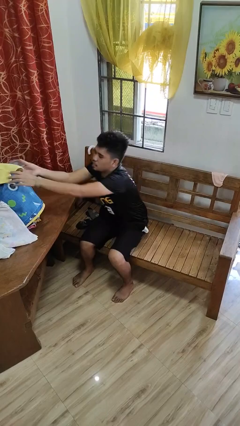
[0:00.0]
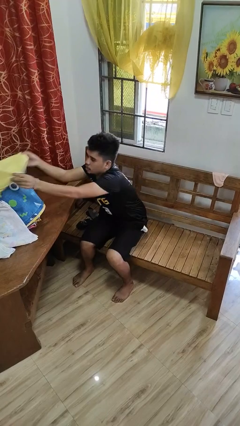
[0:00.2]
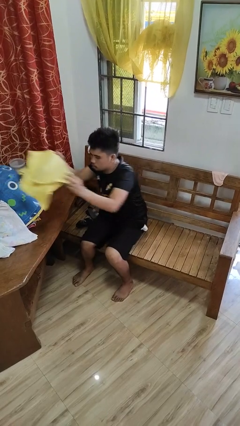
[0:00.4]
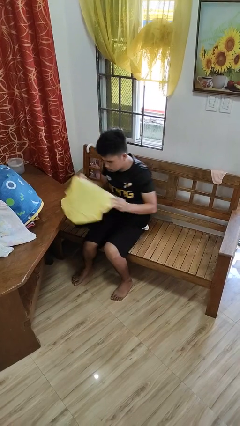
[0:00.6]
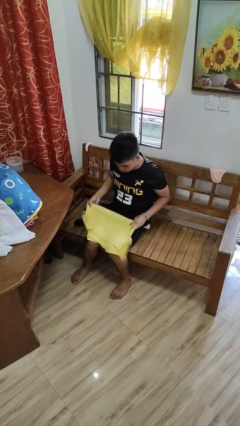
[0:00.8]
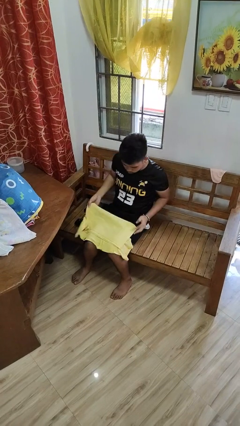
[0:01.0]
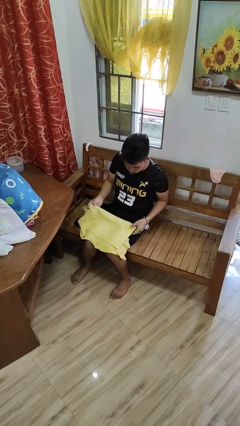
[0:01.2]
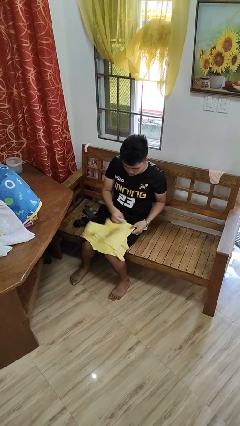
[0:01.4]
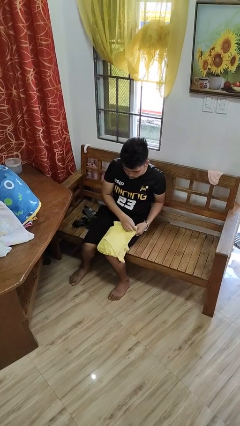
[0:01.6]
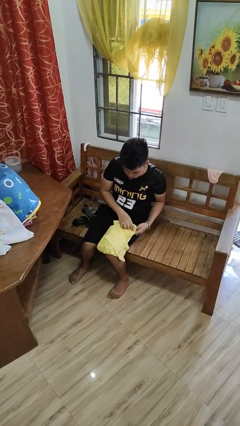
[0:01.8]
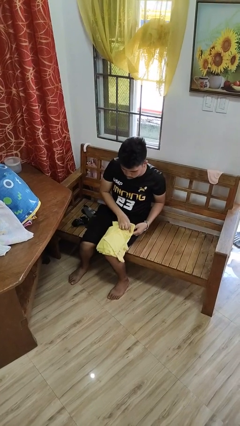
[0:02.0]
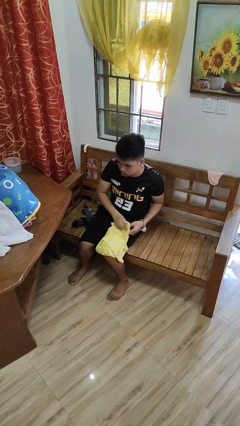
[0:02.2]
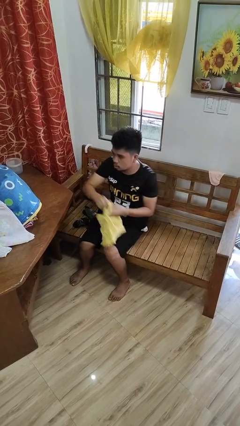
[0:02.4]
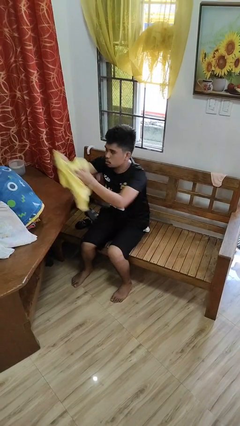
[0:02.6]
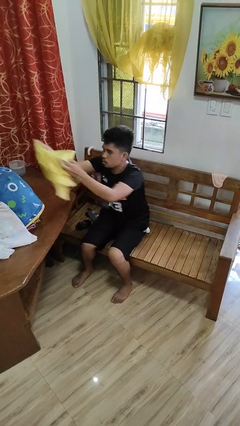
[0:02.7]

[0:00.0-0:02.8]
person folds shirt

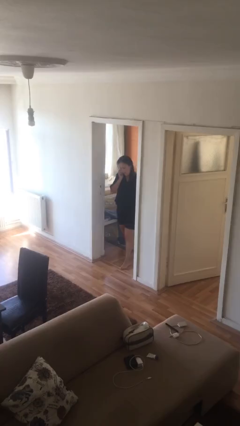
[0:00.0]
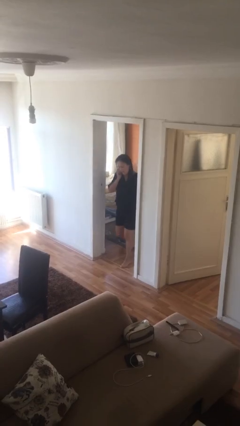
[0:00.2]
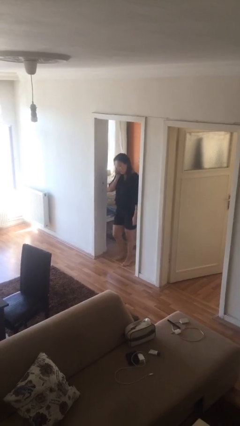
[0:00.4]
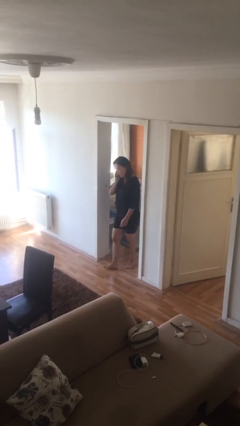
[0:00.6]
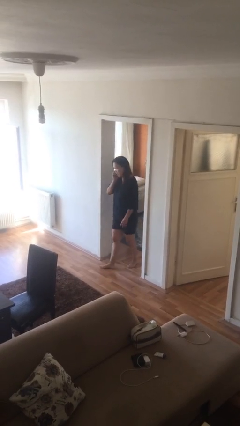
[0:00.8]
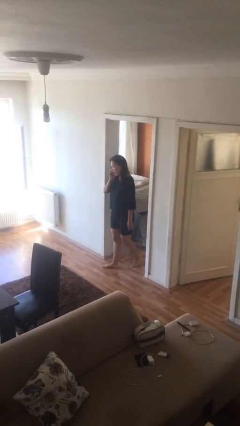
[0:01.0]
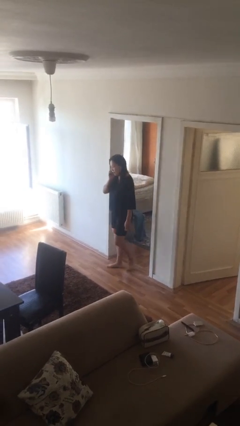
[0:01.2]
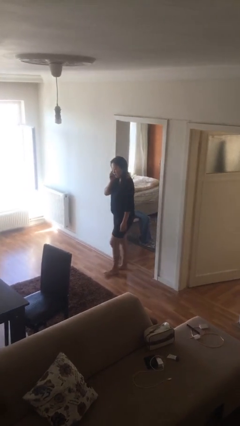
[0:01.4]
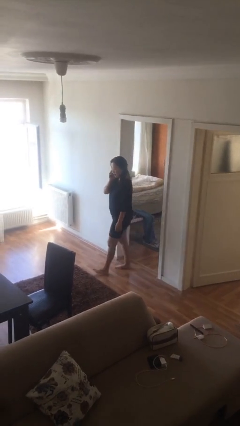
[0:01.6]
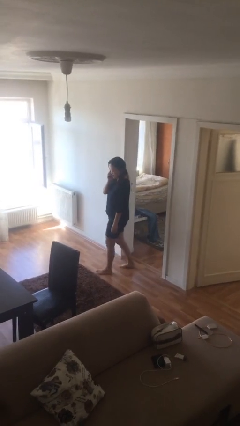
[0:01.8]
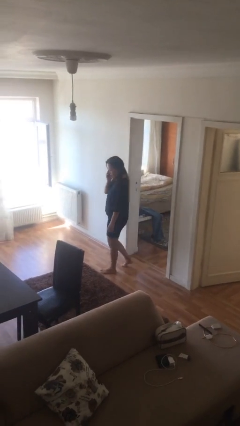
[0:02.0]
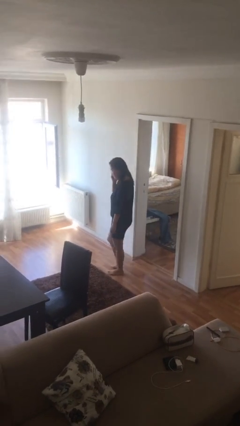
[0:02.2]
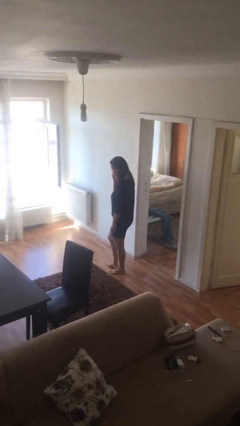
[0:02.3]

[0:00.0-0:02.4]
person enters scene through structure

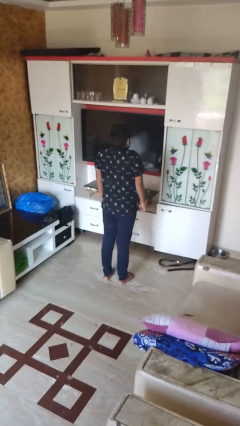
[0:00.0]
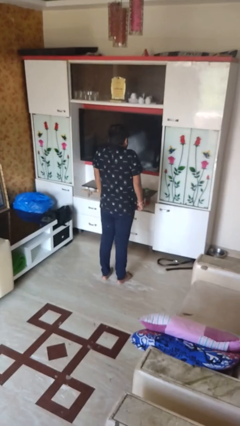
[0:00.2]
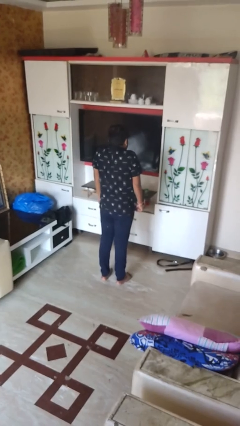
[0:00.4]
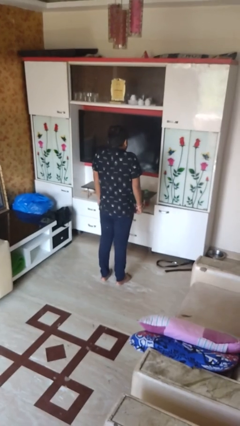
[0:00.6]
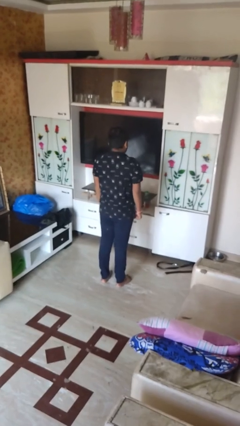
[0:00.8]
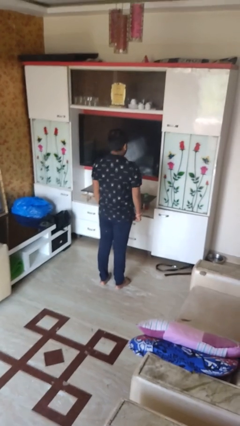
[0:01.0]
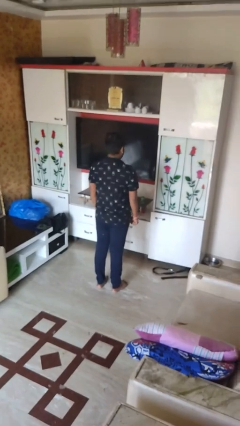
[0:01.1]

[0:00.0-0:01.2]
person shrugs

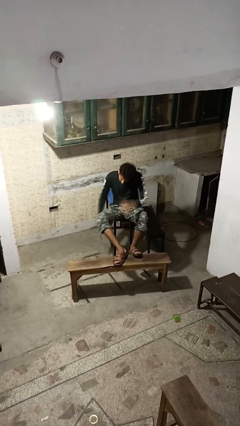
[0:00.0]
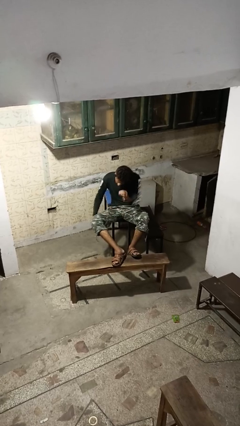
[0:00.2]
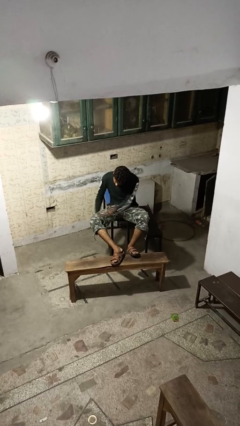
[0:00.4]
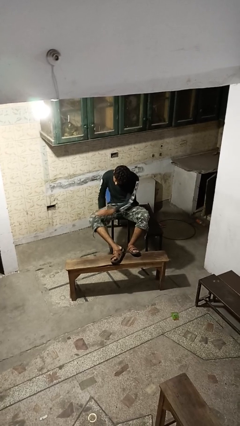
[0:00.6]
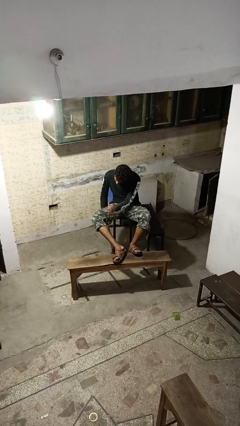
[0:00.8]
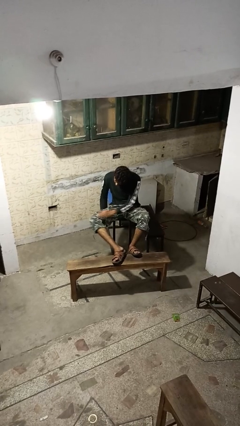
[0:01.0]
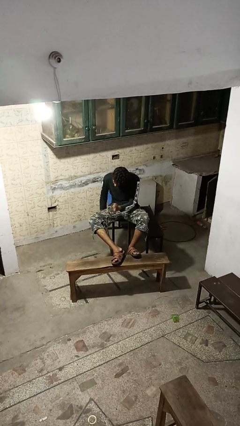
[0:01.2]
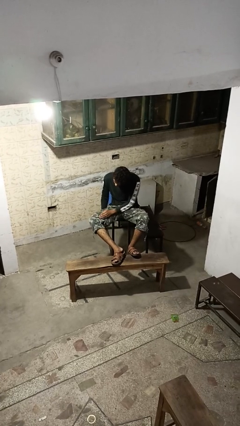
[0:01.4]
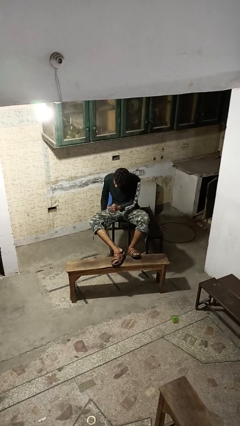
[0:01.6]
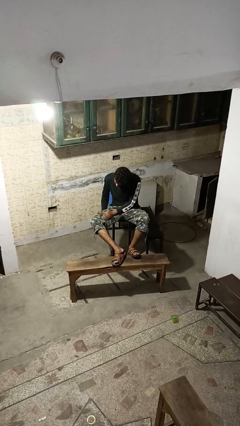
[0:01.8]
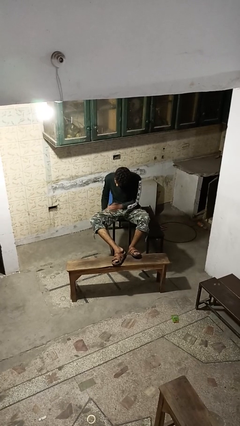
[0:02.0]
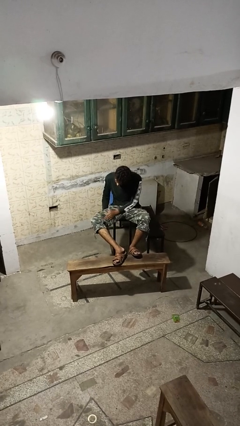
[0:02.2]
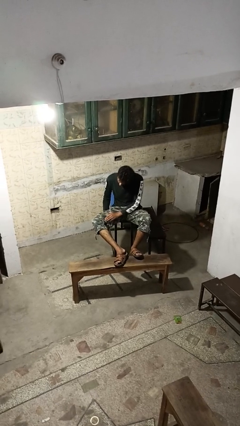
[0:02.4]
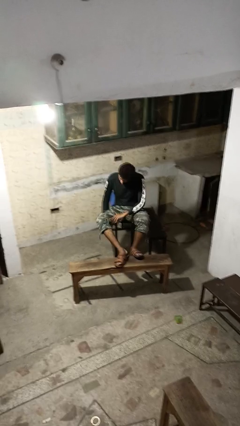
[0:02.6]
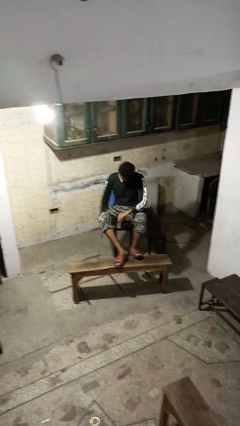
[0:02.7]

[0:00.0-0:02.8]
person slaps hands on thighs

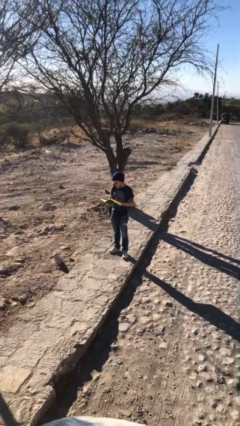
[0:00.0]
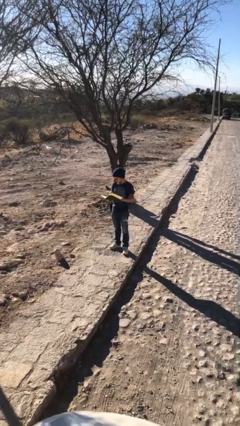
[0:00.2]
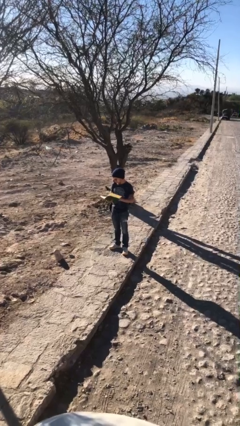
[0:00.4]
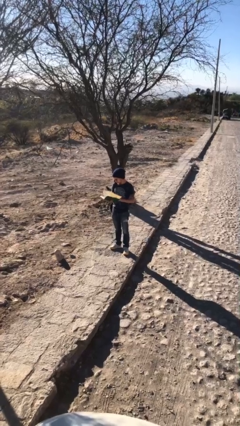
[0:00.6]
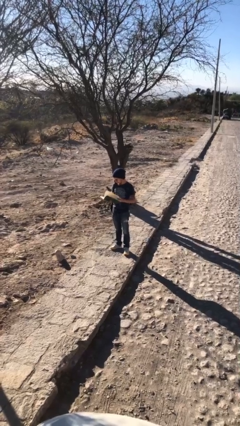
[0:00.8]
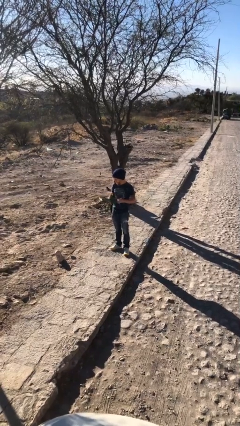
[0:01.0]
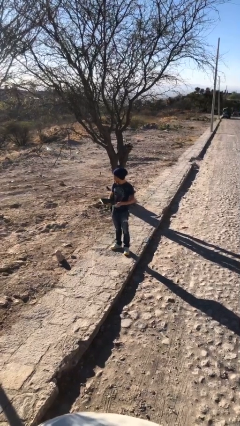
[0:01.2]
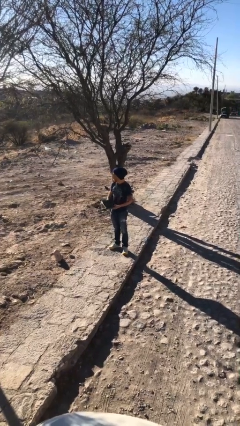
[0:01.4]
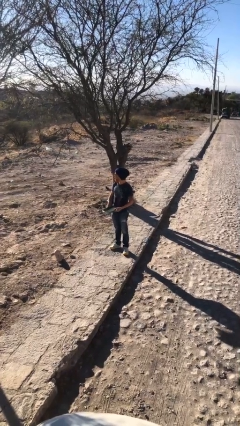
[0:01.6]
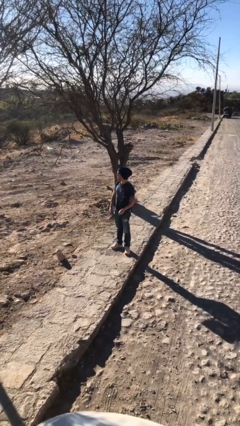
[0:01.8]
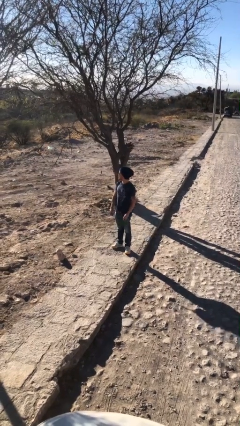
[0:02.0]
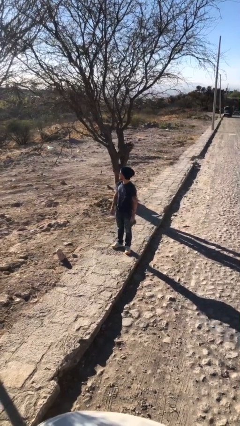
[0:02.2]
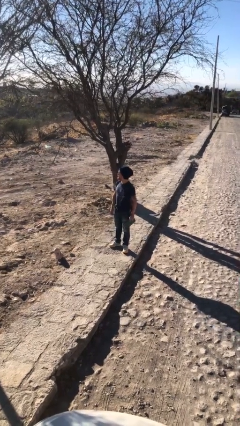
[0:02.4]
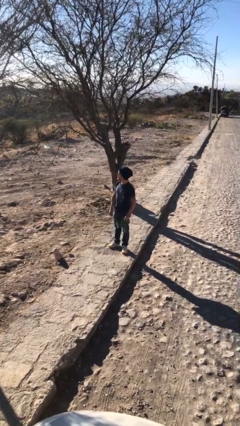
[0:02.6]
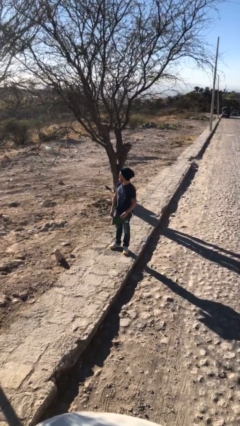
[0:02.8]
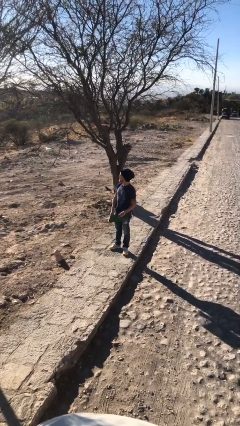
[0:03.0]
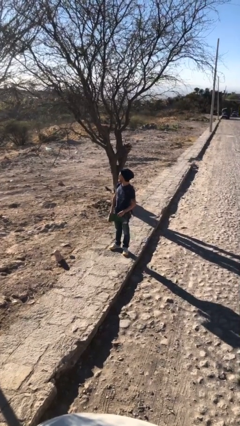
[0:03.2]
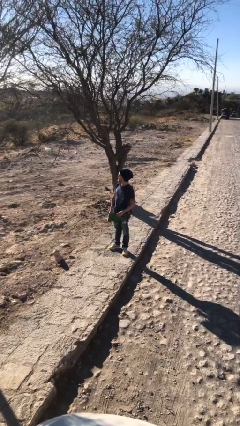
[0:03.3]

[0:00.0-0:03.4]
person reads document

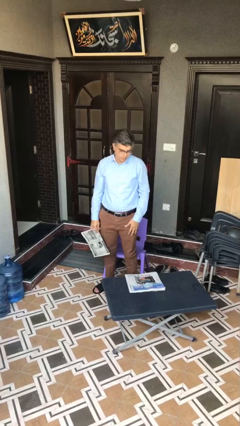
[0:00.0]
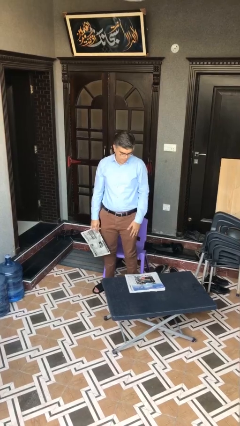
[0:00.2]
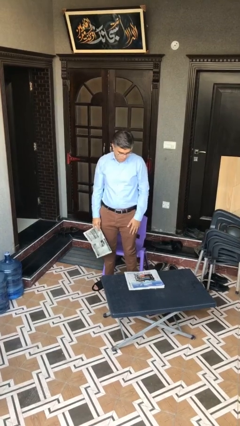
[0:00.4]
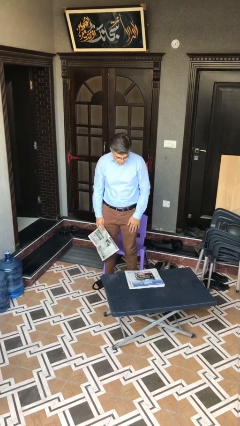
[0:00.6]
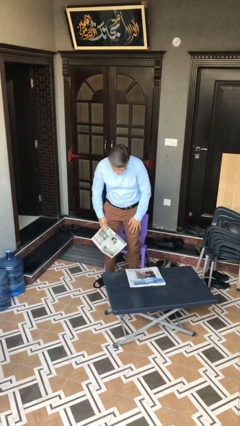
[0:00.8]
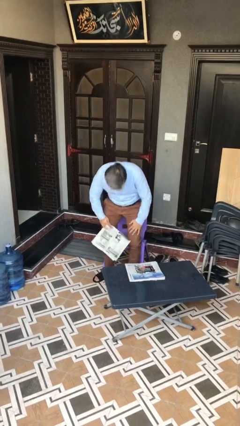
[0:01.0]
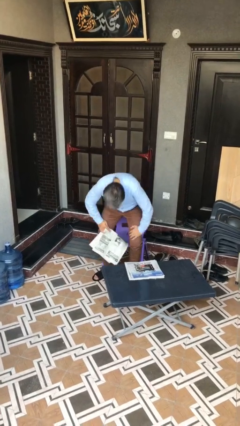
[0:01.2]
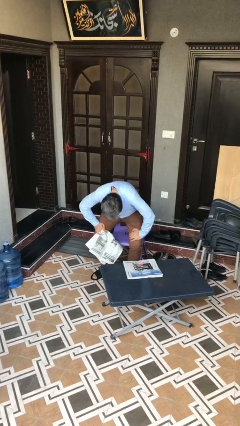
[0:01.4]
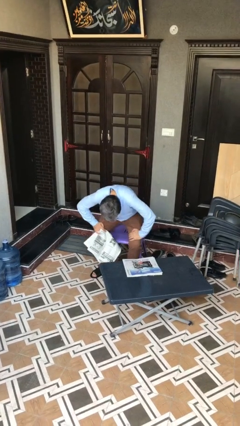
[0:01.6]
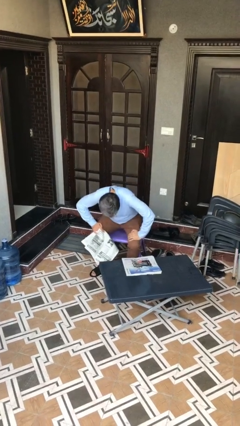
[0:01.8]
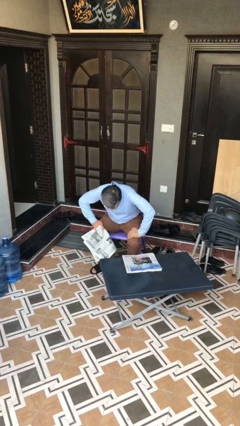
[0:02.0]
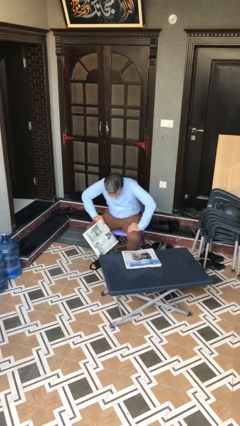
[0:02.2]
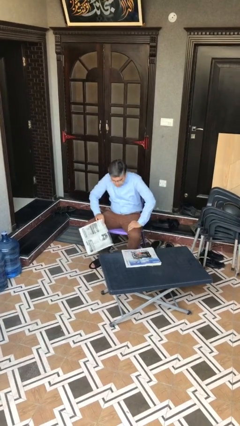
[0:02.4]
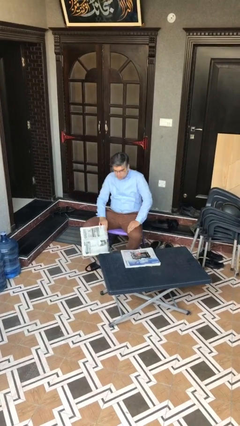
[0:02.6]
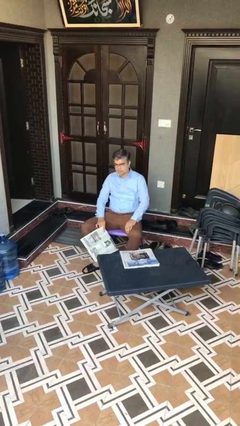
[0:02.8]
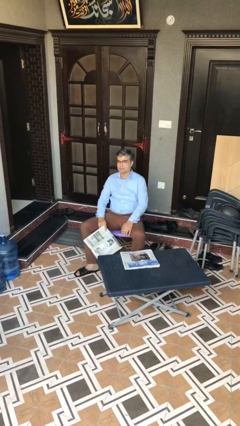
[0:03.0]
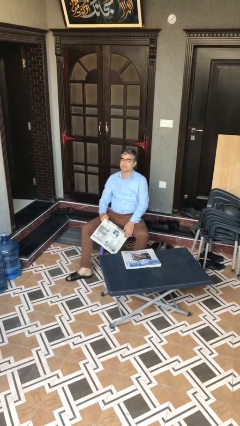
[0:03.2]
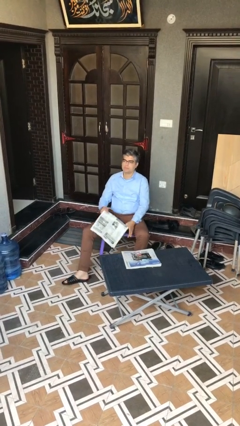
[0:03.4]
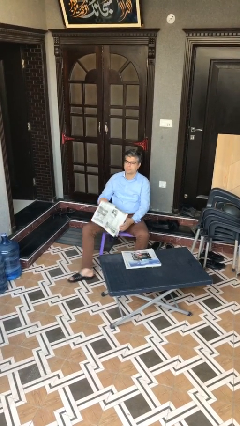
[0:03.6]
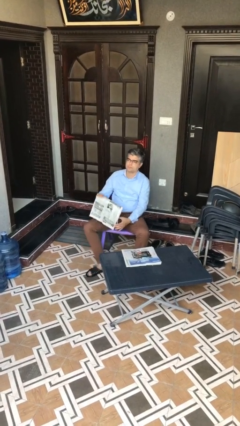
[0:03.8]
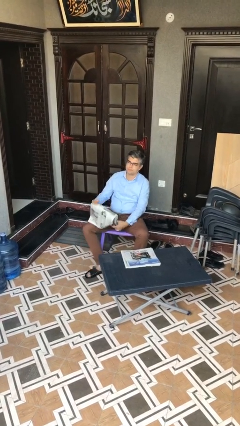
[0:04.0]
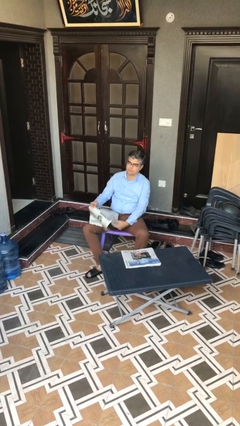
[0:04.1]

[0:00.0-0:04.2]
person sits down

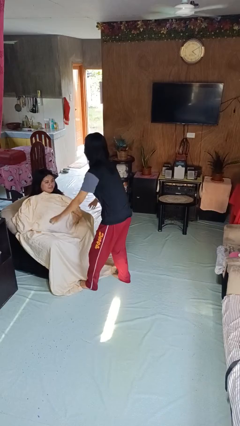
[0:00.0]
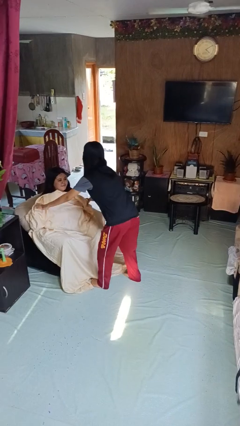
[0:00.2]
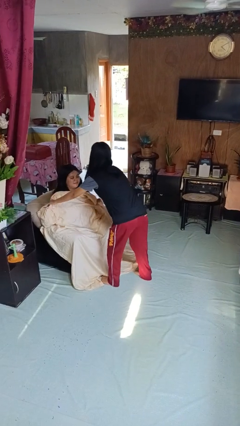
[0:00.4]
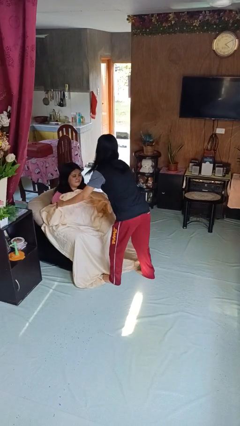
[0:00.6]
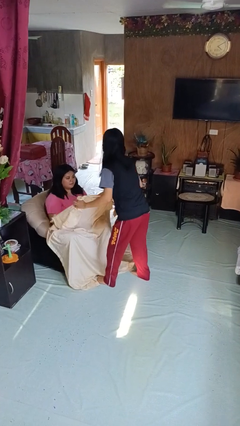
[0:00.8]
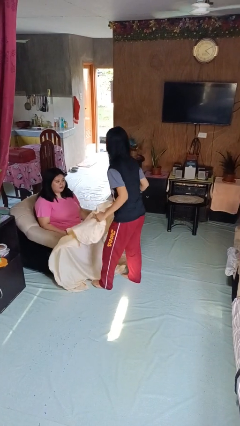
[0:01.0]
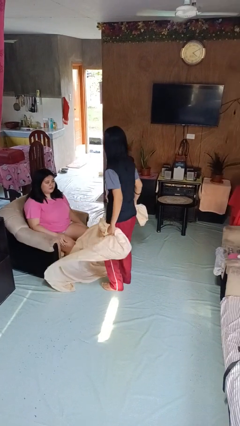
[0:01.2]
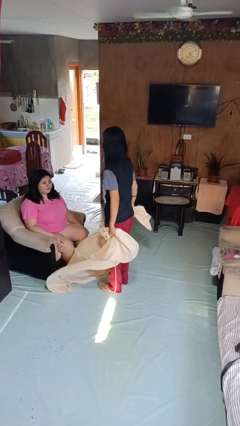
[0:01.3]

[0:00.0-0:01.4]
person uncovers friend with blanket
